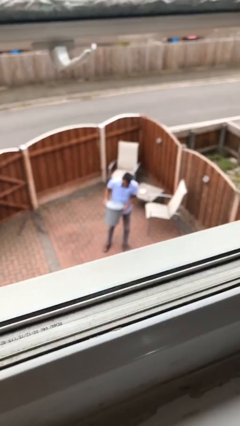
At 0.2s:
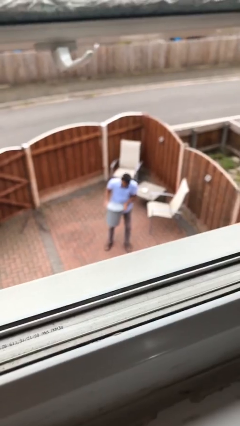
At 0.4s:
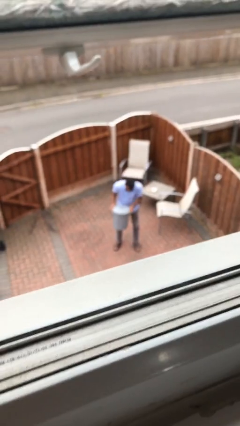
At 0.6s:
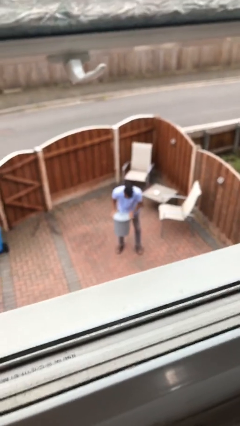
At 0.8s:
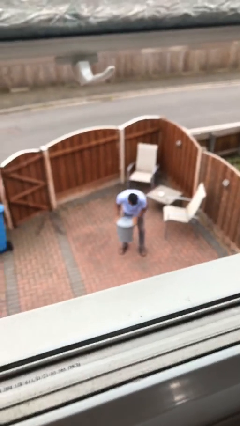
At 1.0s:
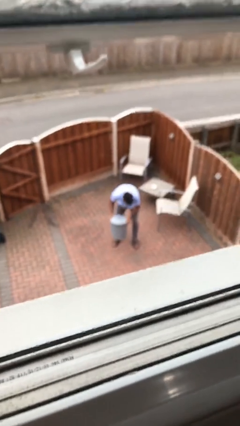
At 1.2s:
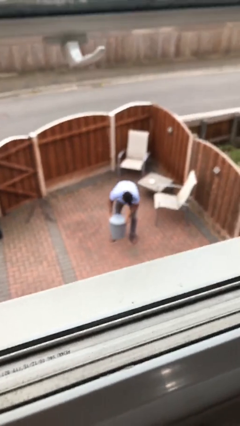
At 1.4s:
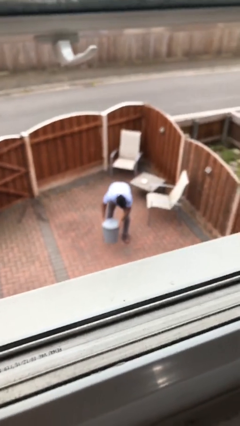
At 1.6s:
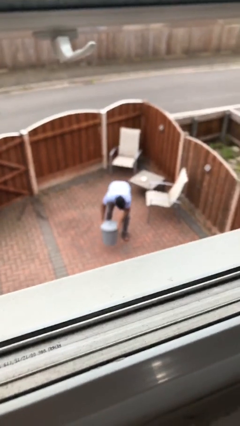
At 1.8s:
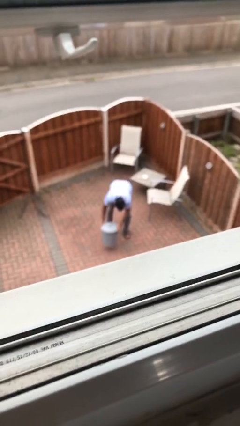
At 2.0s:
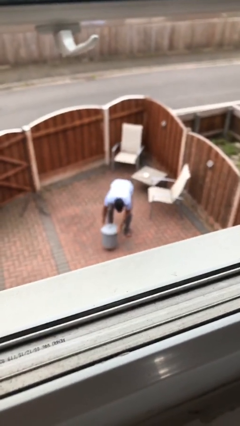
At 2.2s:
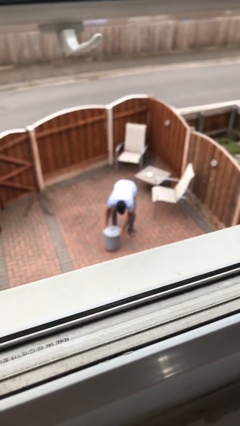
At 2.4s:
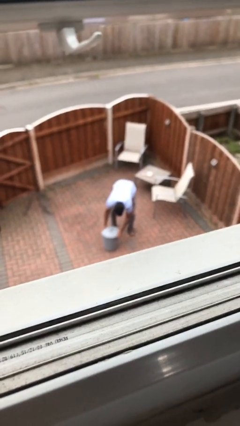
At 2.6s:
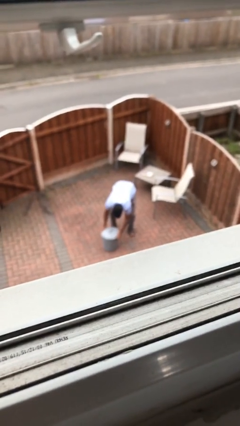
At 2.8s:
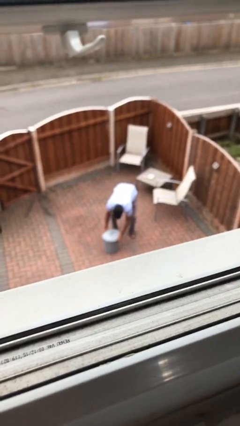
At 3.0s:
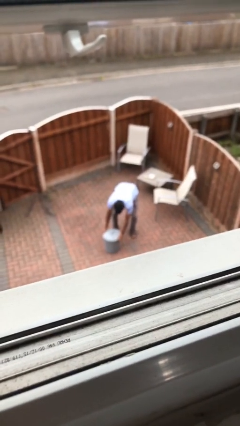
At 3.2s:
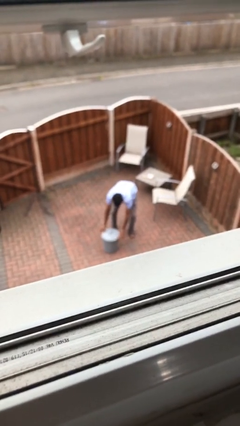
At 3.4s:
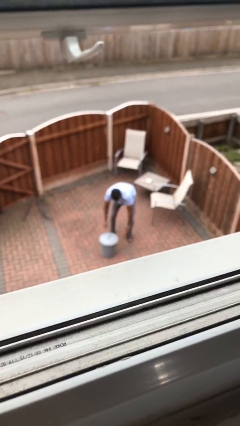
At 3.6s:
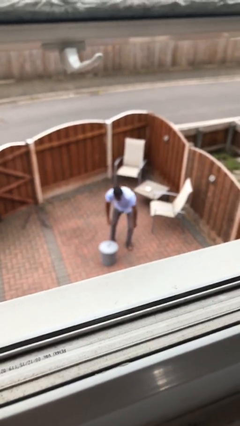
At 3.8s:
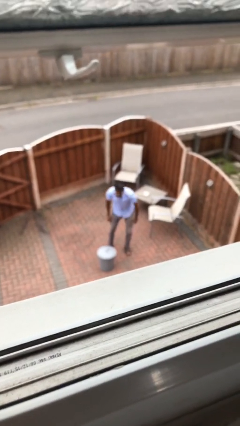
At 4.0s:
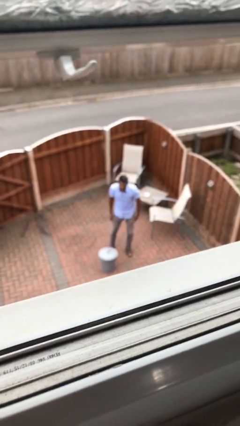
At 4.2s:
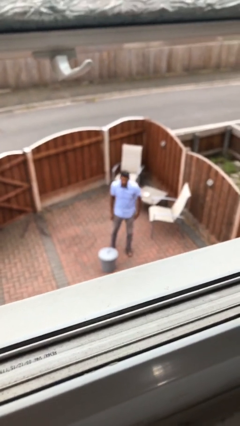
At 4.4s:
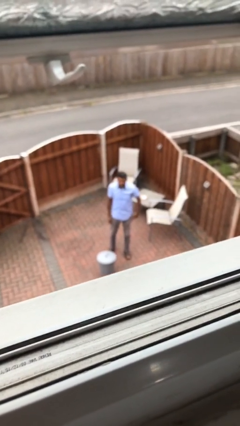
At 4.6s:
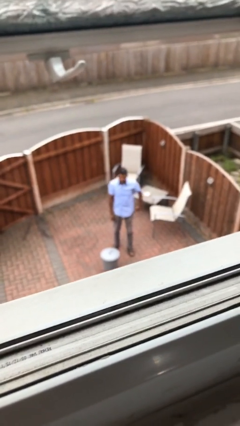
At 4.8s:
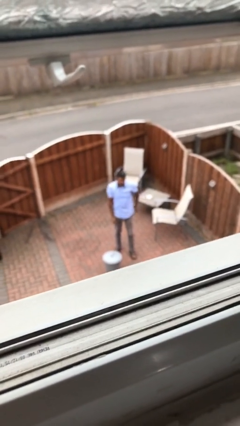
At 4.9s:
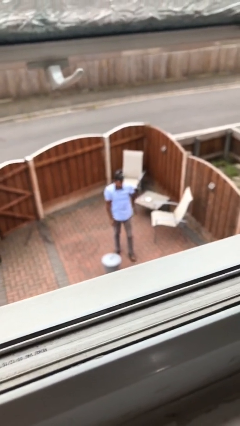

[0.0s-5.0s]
person puts down object on floor

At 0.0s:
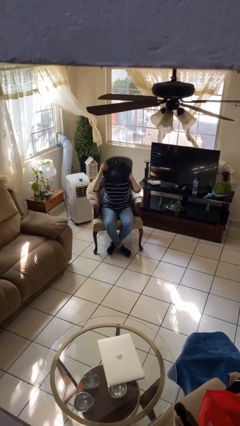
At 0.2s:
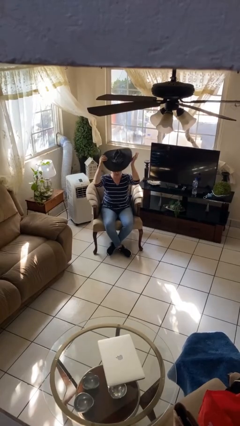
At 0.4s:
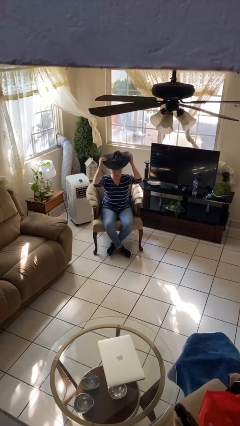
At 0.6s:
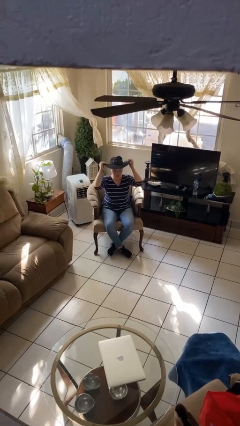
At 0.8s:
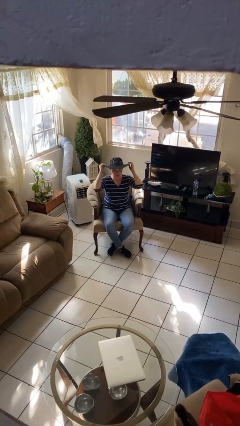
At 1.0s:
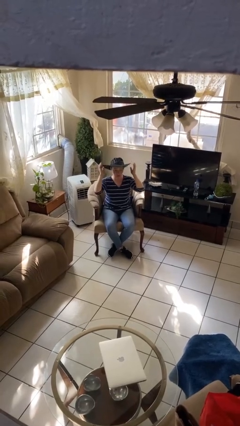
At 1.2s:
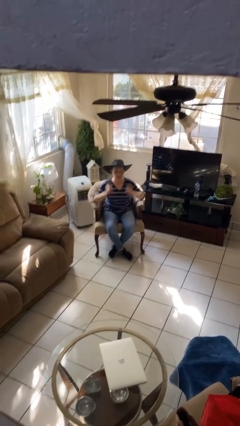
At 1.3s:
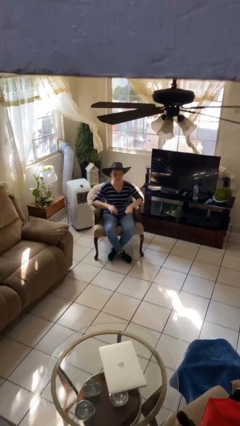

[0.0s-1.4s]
person puts on hat

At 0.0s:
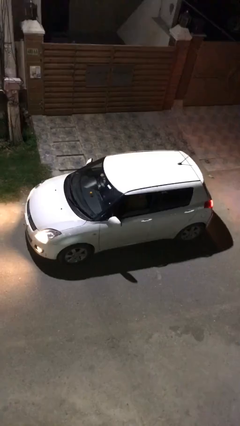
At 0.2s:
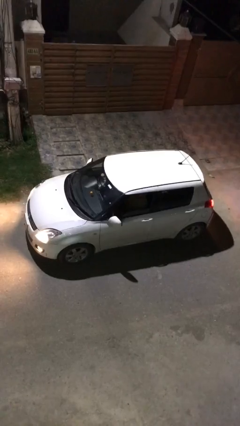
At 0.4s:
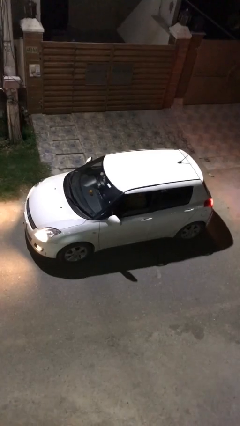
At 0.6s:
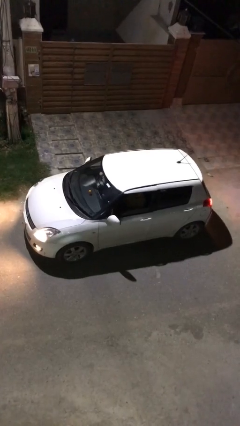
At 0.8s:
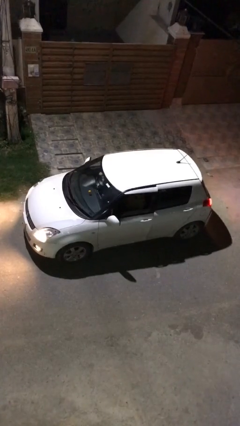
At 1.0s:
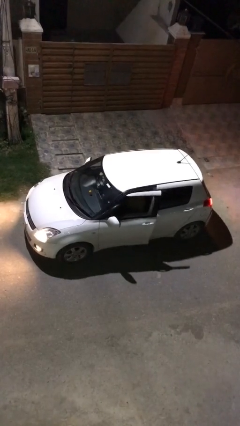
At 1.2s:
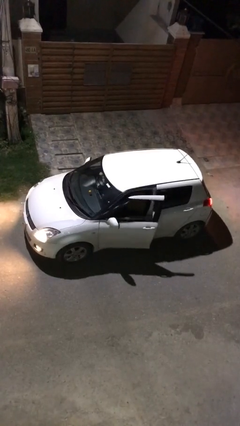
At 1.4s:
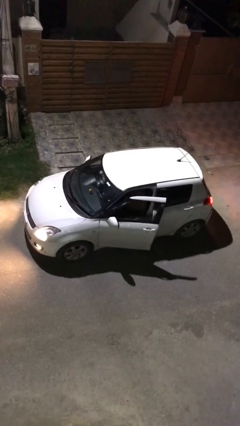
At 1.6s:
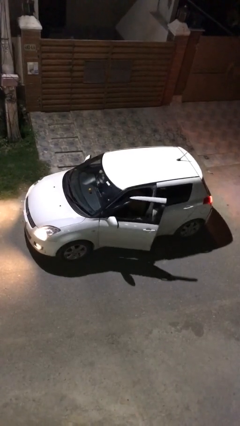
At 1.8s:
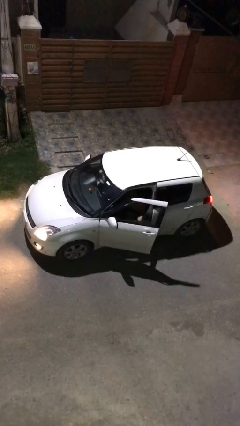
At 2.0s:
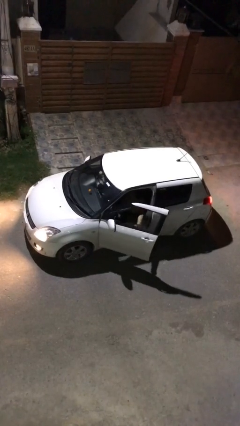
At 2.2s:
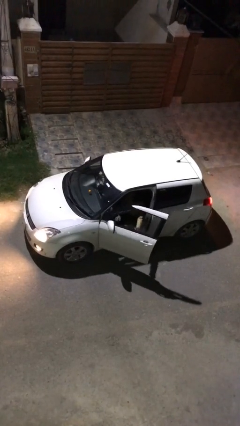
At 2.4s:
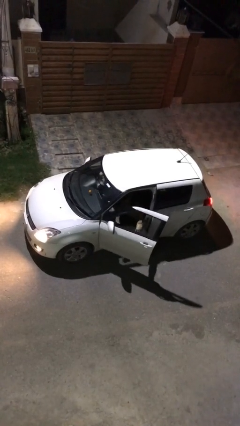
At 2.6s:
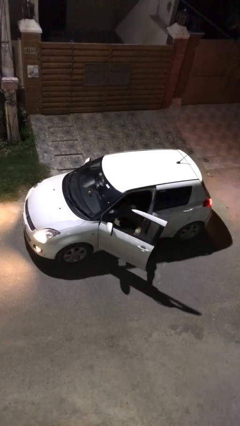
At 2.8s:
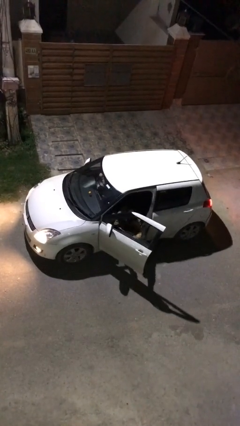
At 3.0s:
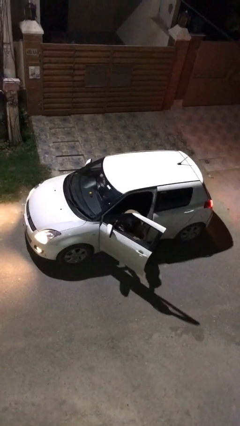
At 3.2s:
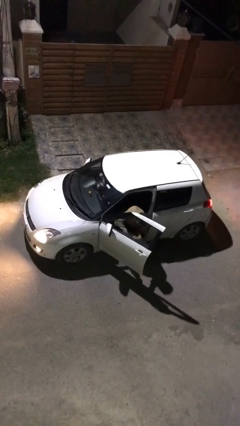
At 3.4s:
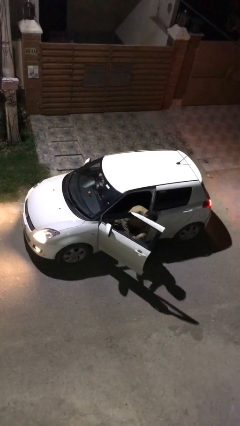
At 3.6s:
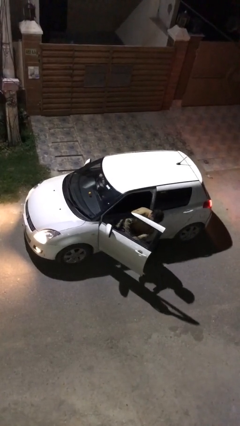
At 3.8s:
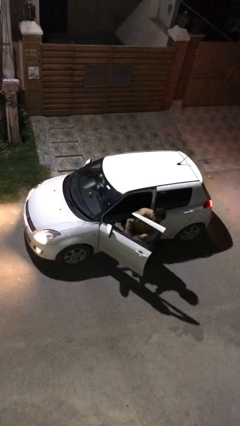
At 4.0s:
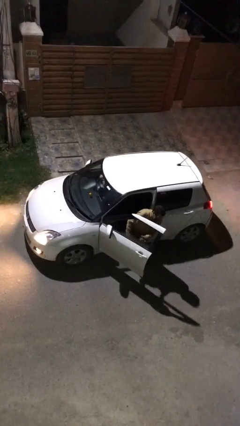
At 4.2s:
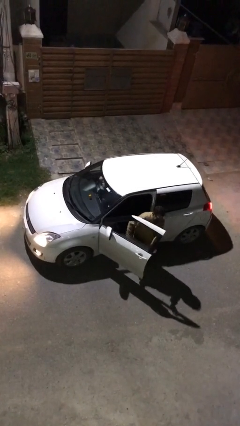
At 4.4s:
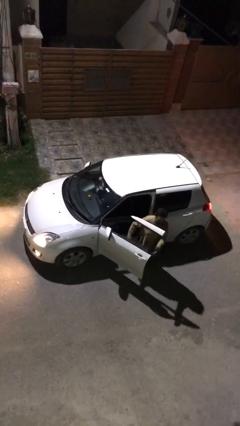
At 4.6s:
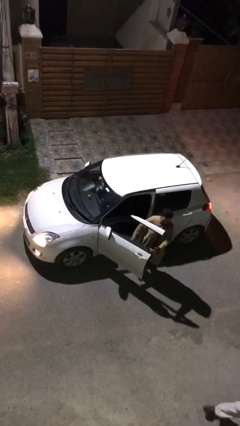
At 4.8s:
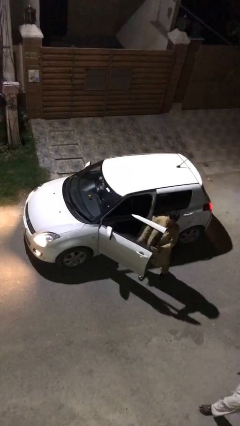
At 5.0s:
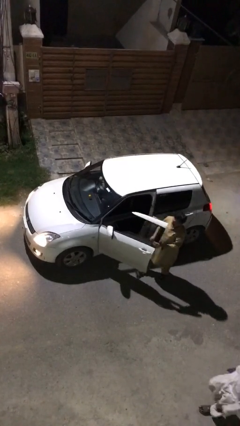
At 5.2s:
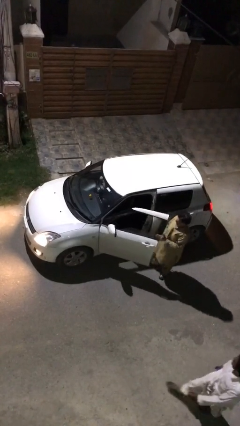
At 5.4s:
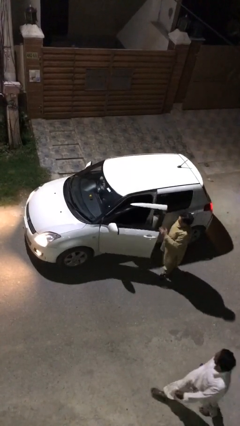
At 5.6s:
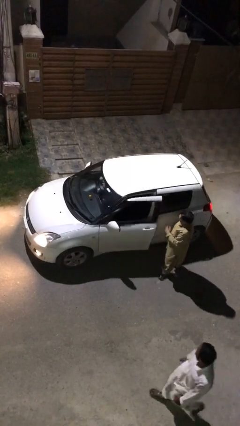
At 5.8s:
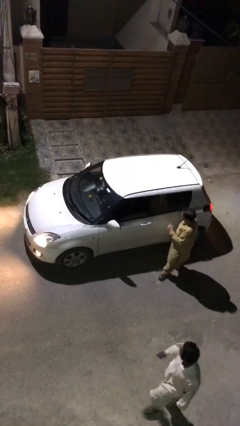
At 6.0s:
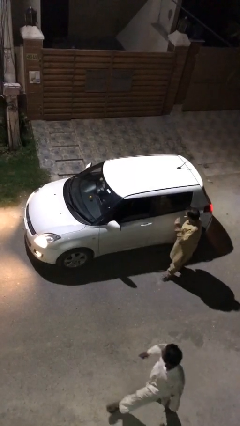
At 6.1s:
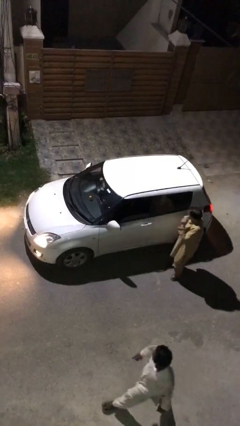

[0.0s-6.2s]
car drops off person

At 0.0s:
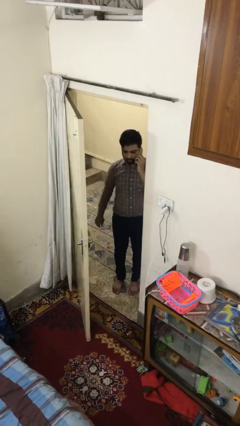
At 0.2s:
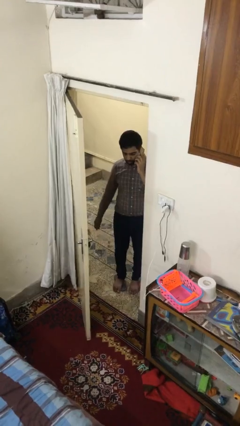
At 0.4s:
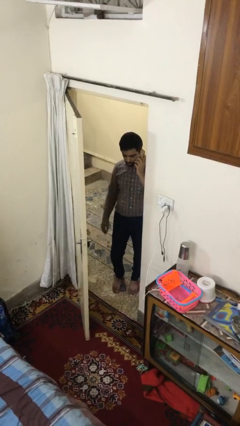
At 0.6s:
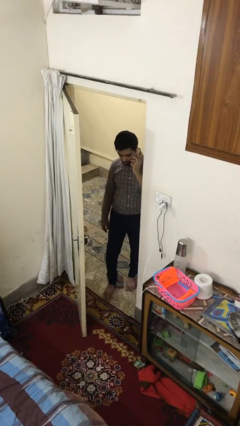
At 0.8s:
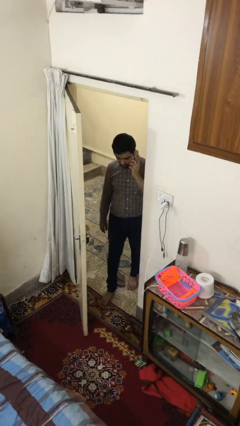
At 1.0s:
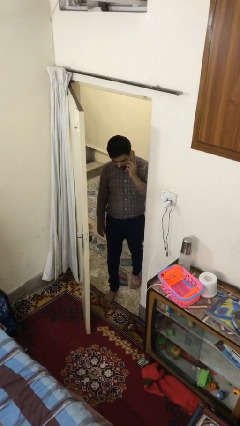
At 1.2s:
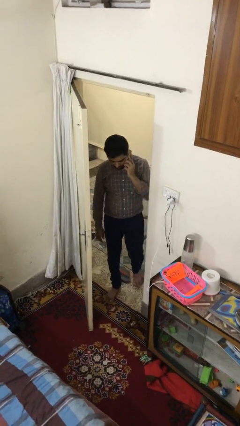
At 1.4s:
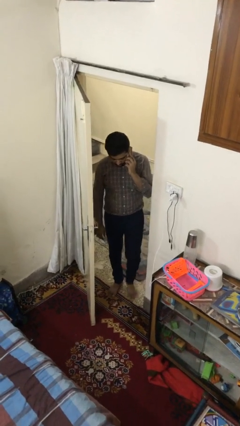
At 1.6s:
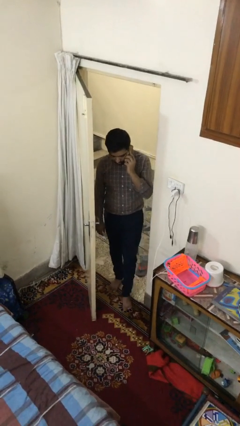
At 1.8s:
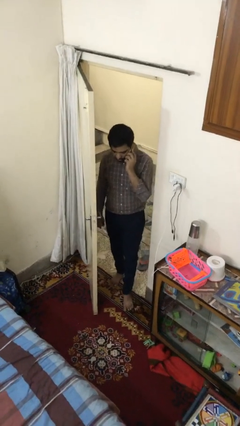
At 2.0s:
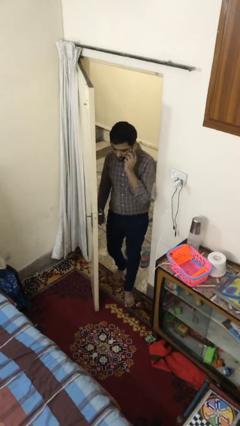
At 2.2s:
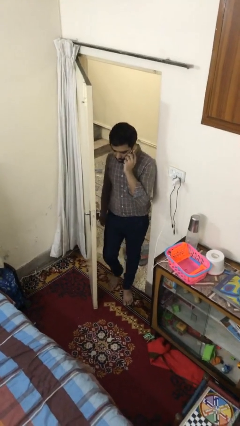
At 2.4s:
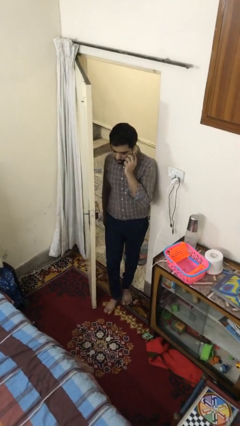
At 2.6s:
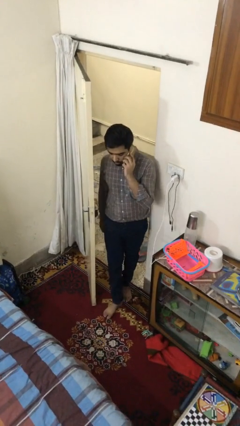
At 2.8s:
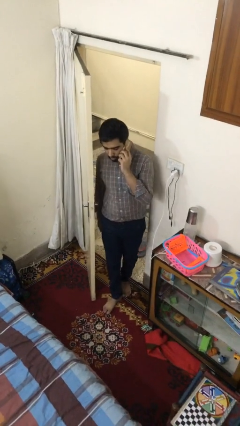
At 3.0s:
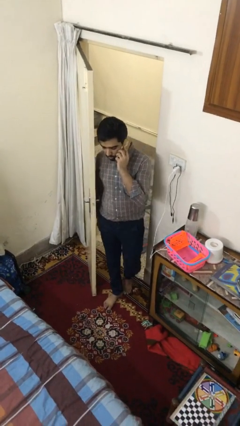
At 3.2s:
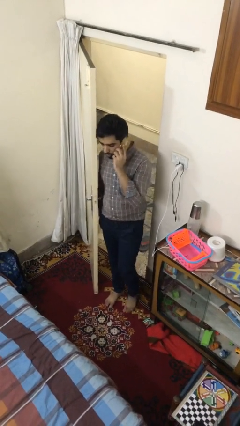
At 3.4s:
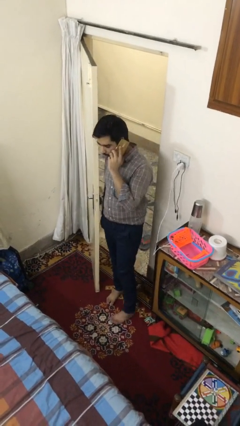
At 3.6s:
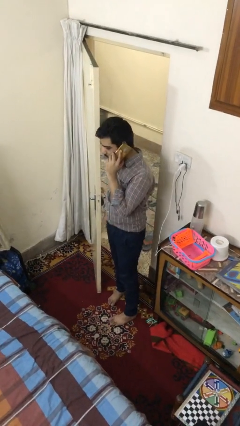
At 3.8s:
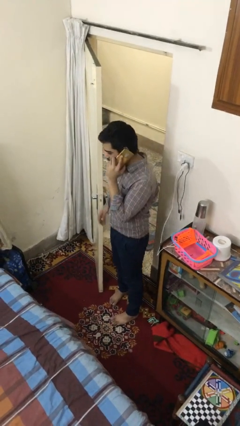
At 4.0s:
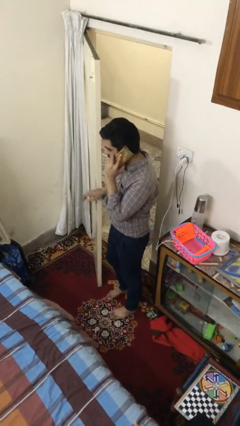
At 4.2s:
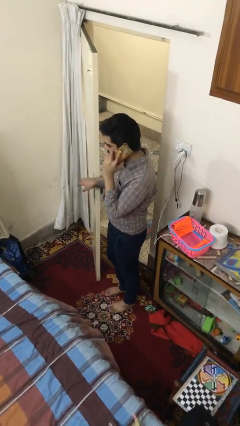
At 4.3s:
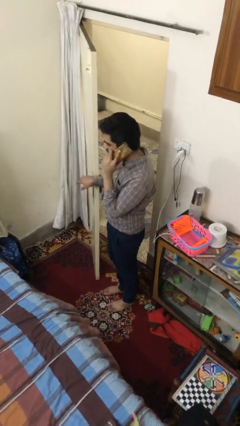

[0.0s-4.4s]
person enters scene through structure

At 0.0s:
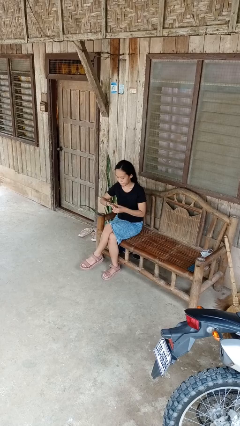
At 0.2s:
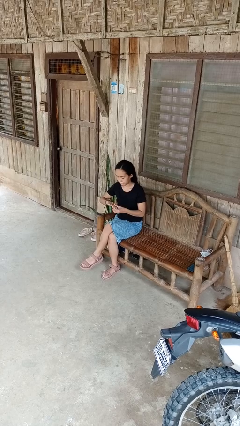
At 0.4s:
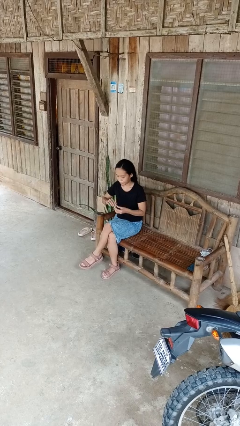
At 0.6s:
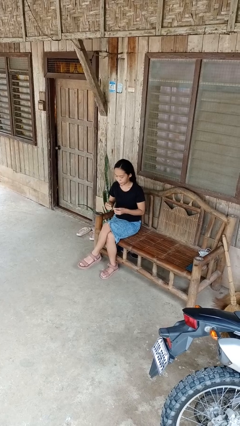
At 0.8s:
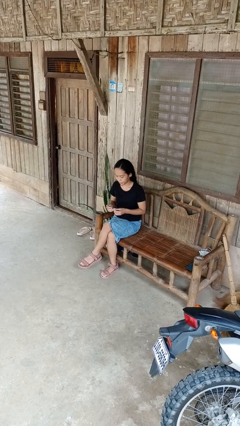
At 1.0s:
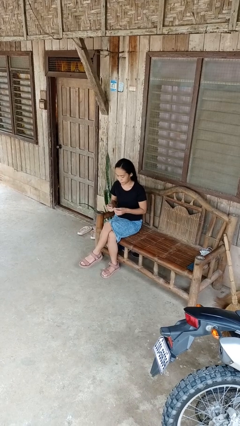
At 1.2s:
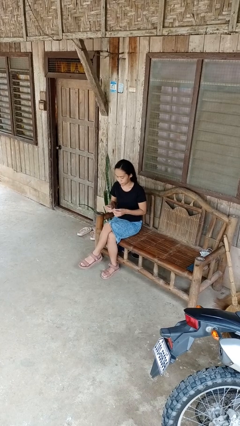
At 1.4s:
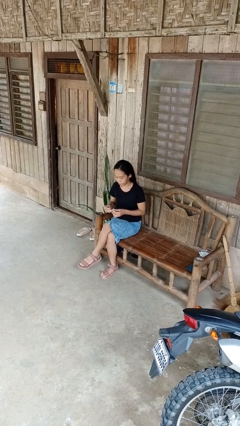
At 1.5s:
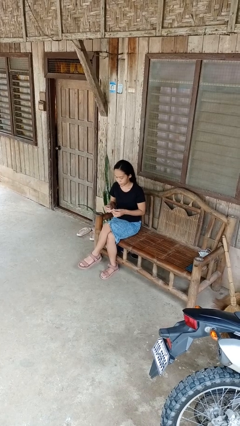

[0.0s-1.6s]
person takes off ring
